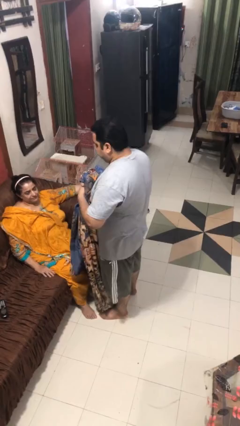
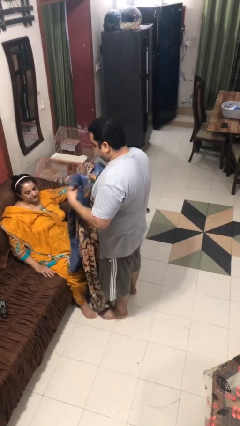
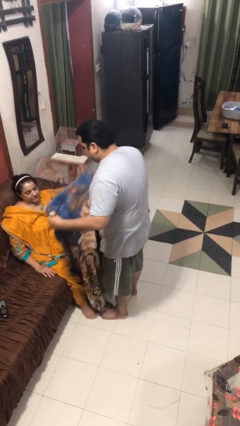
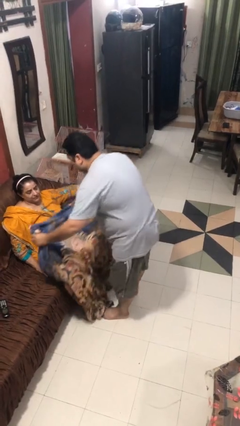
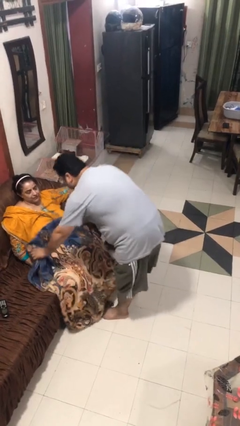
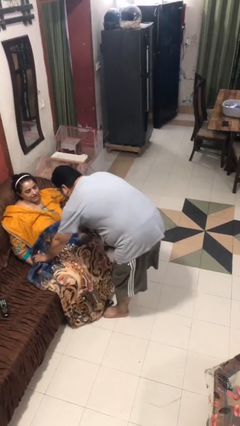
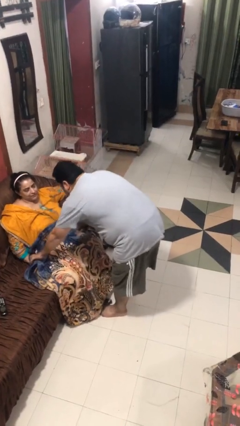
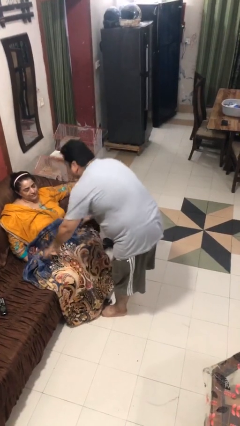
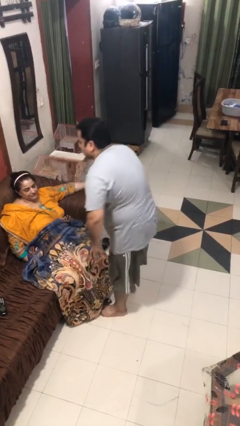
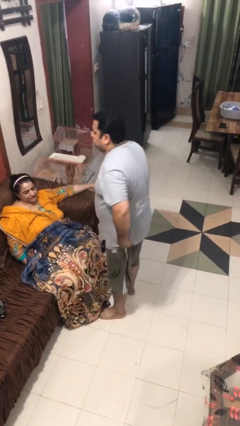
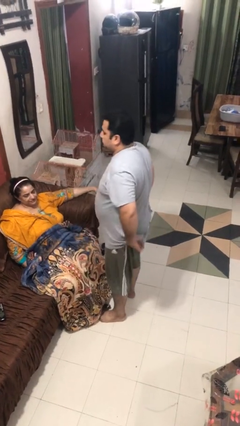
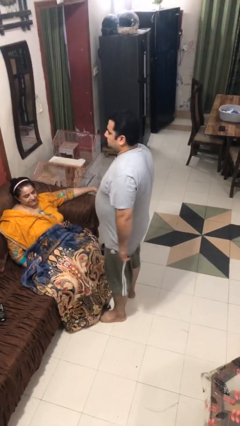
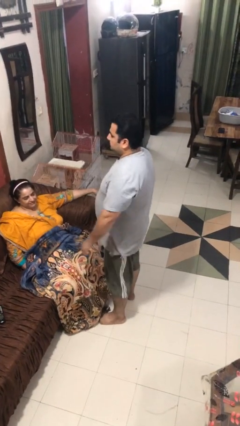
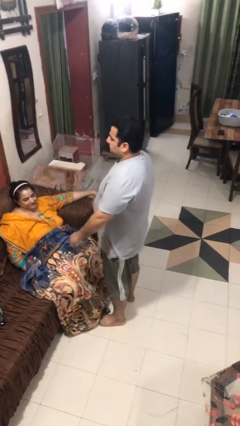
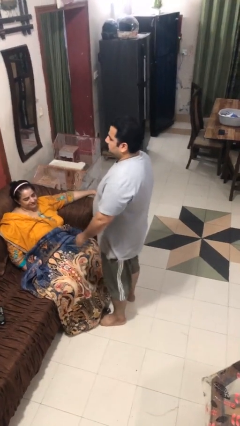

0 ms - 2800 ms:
person covers friend with blanket

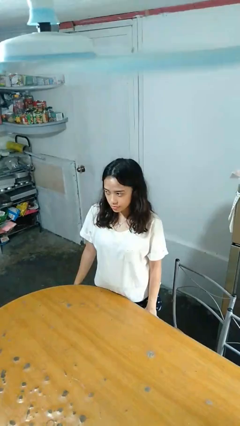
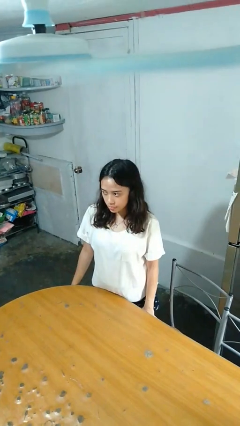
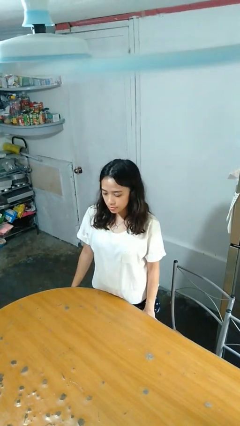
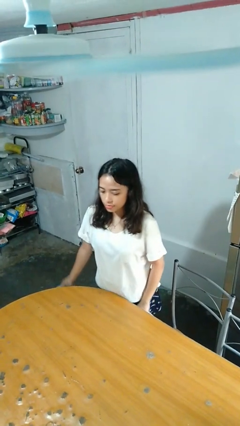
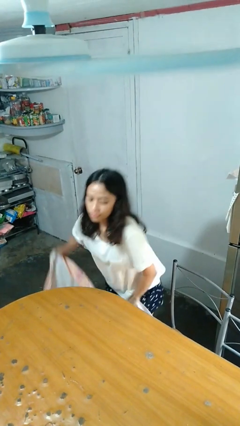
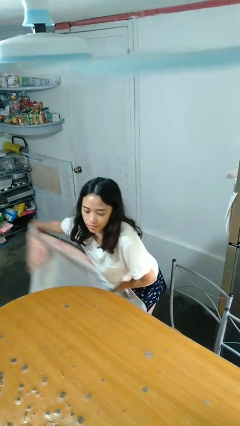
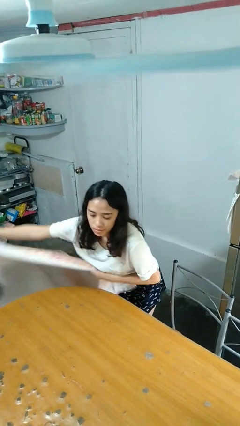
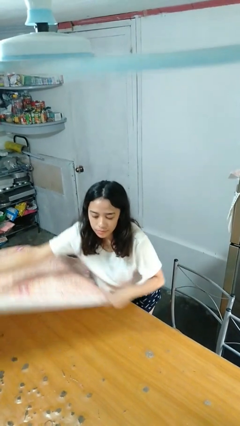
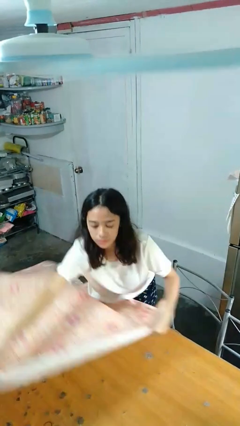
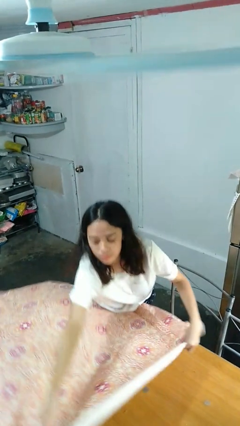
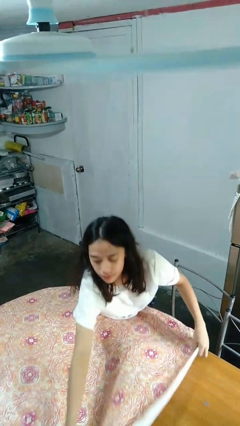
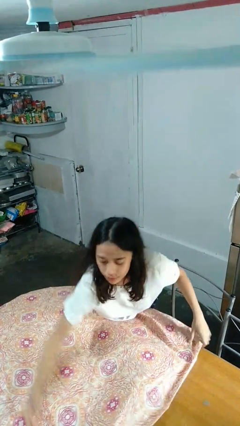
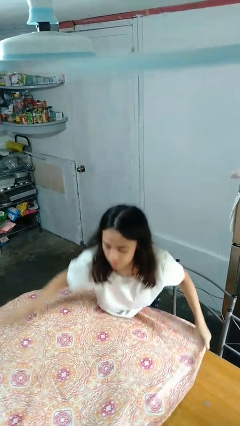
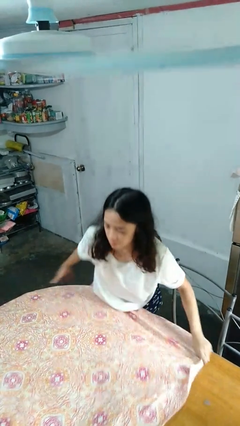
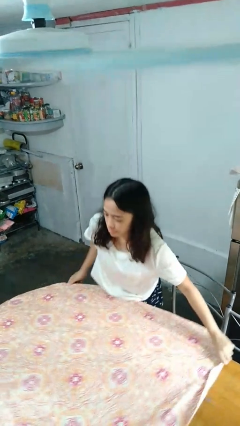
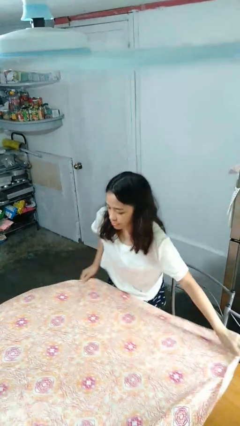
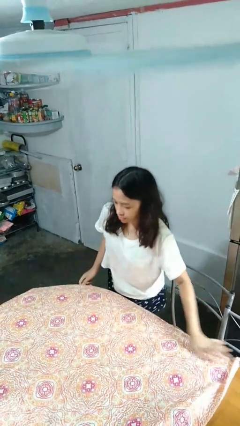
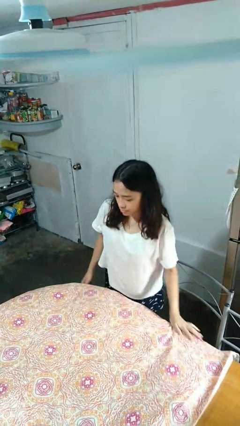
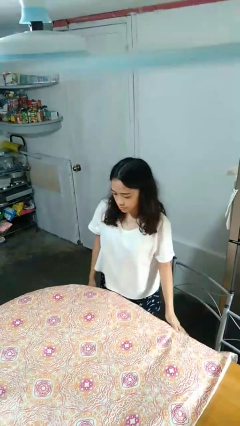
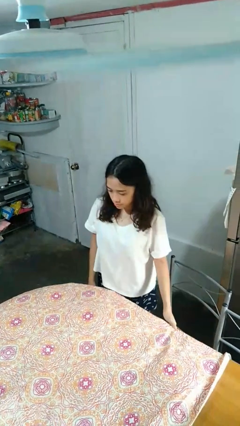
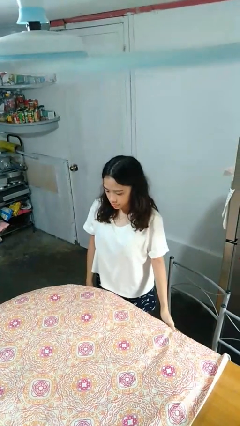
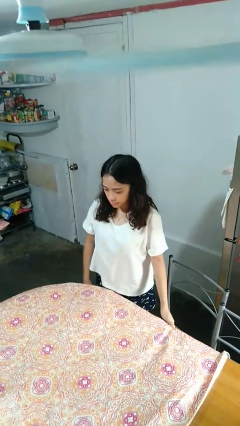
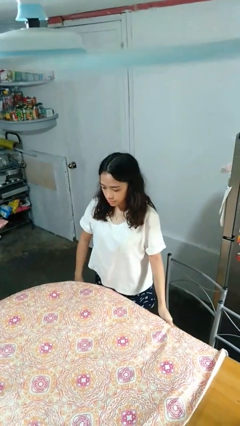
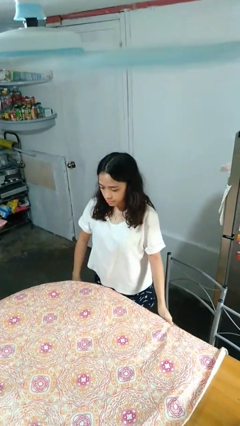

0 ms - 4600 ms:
person spreads tablecloth

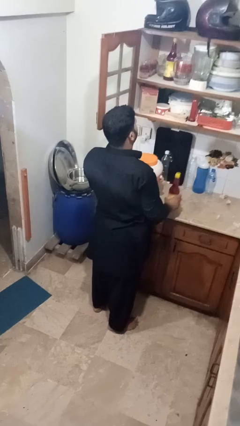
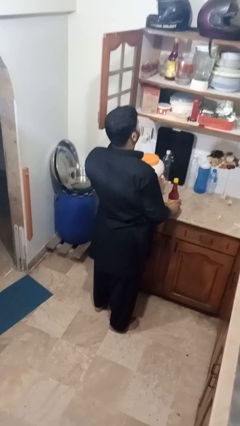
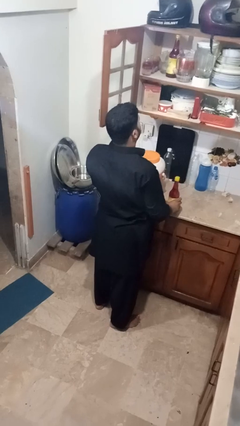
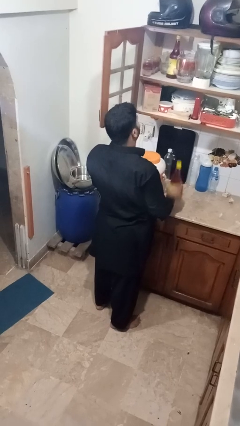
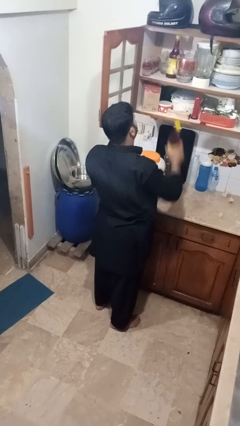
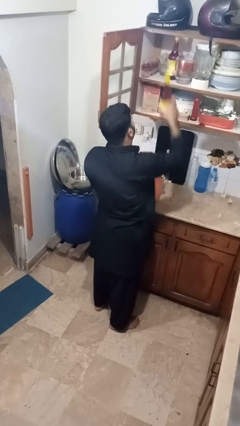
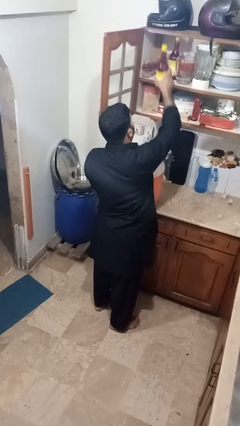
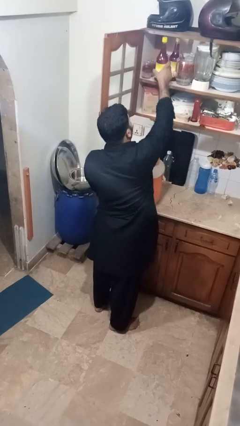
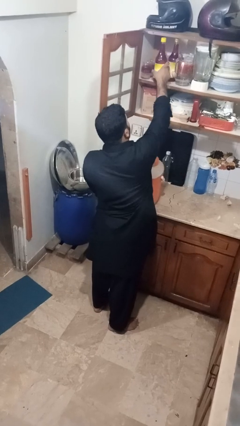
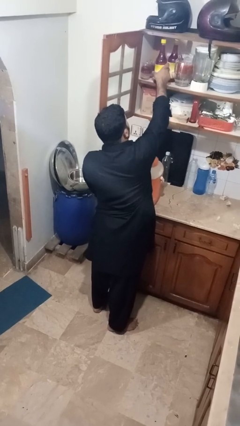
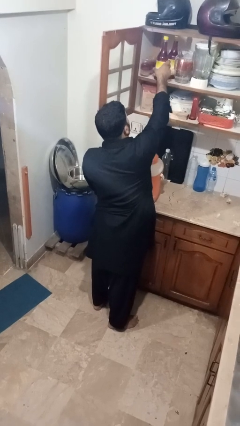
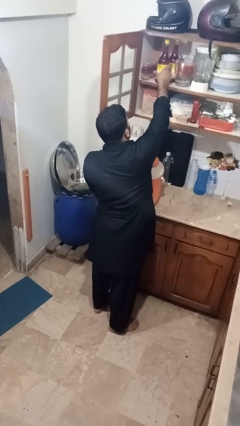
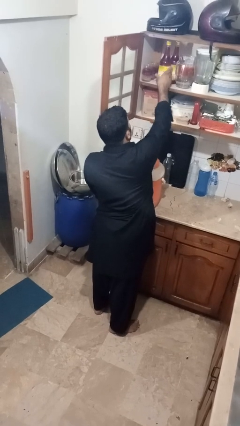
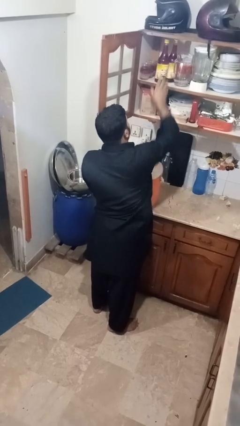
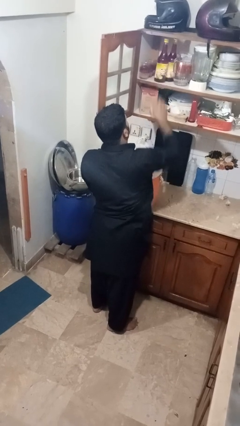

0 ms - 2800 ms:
person puts down object into cabinet

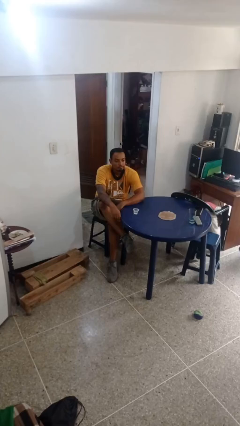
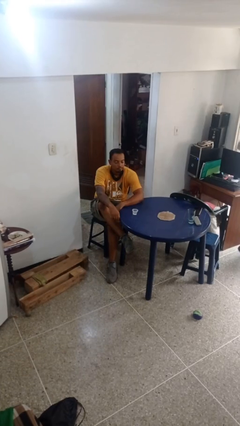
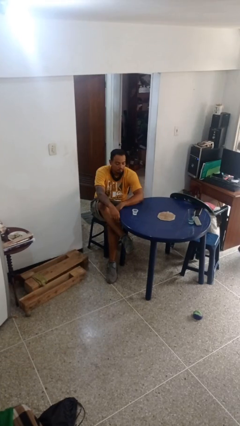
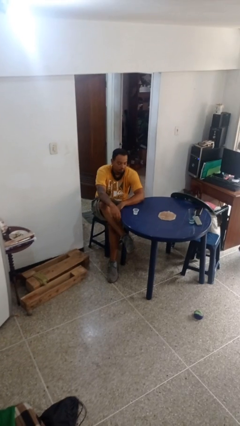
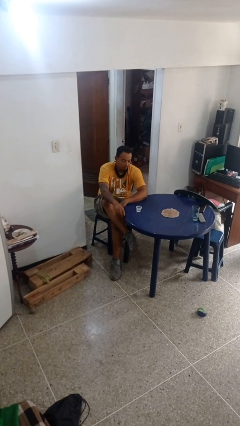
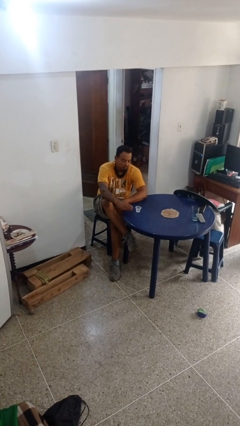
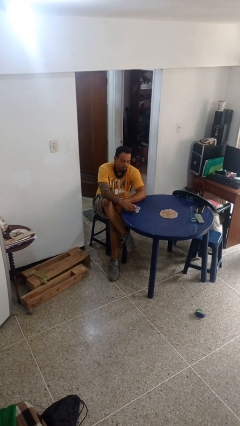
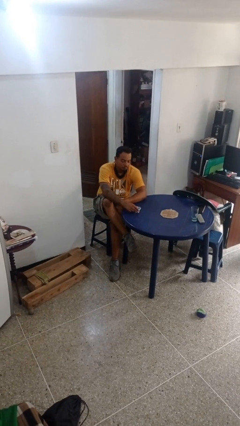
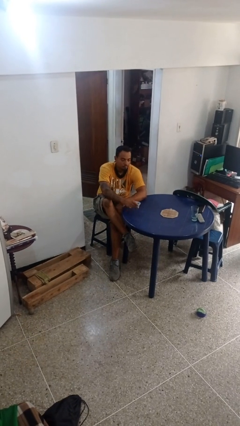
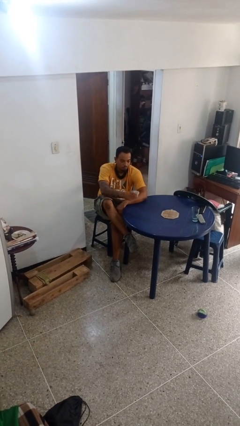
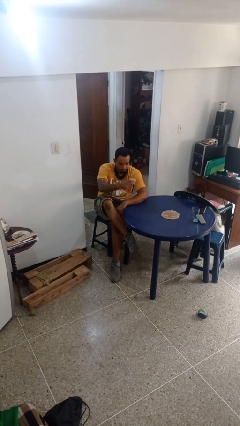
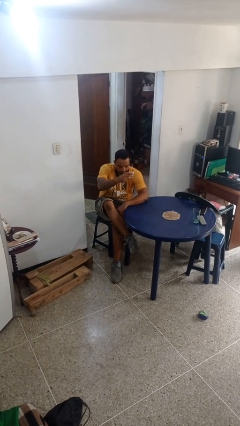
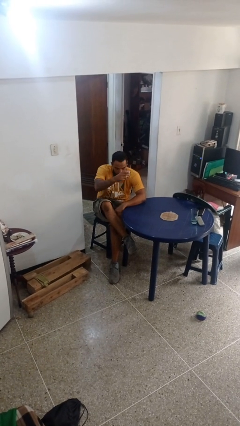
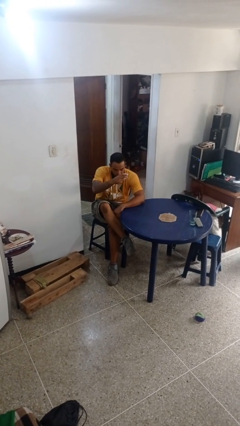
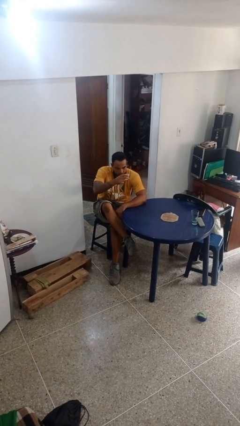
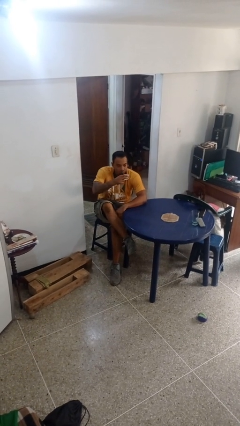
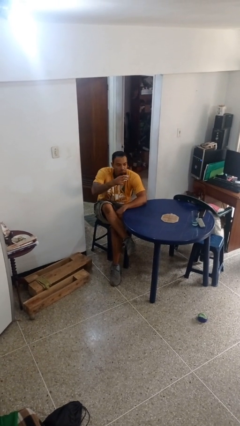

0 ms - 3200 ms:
person picks up object from table

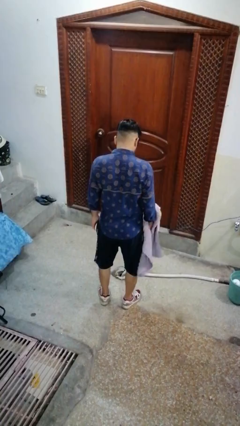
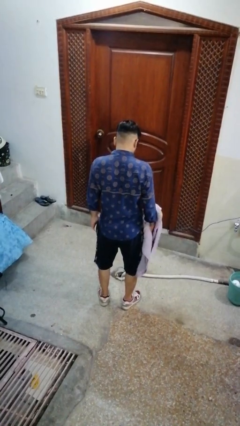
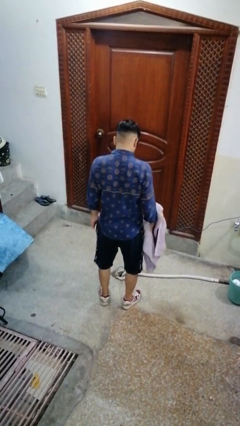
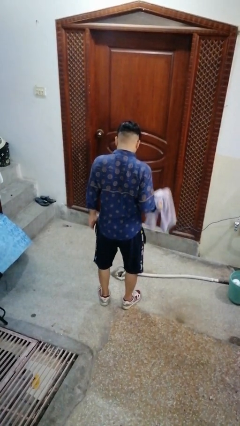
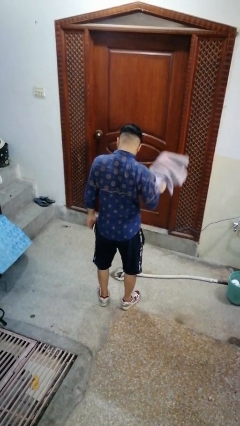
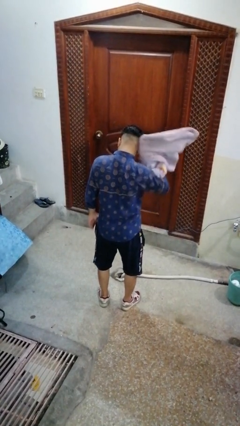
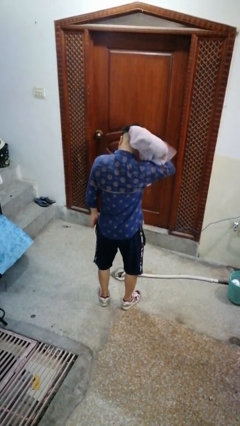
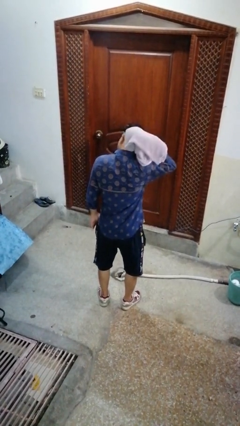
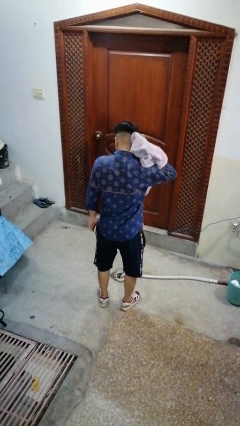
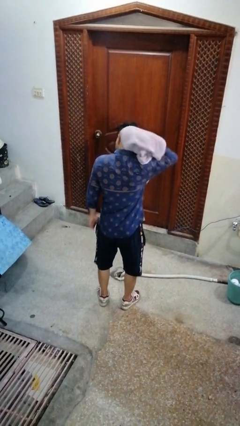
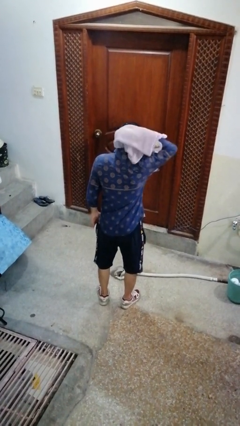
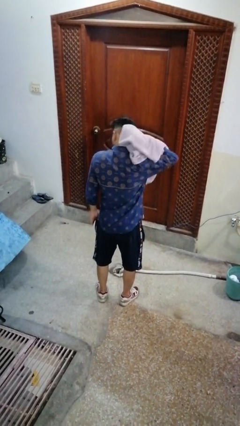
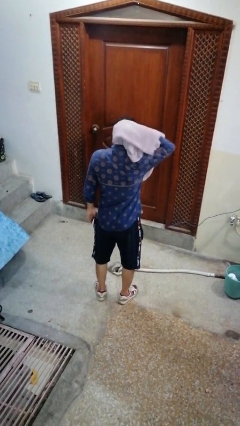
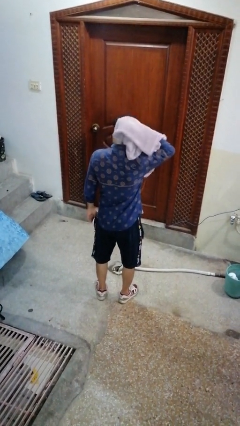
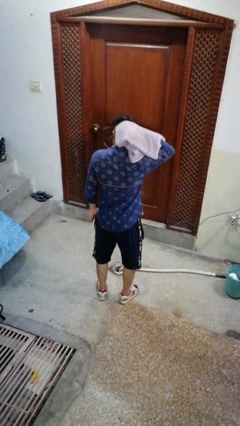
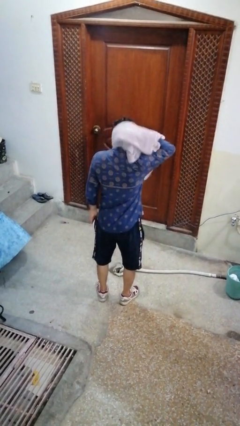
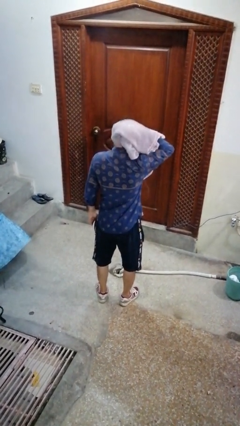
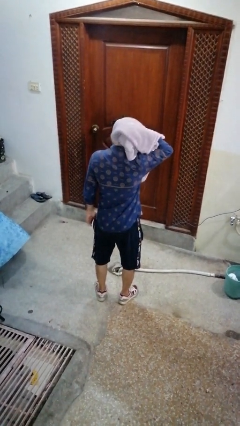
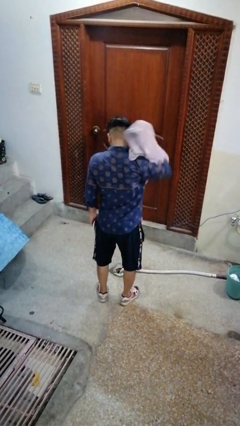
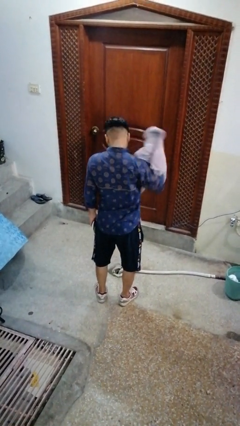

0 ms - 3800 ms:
person dries hair with towel

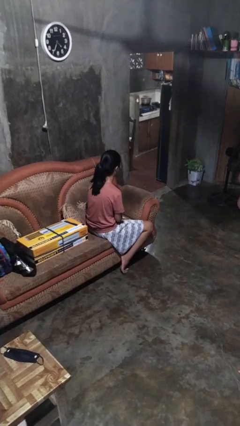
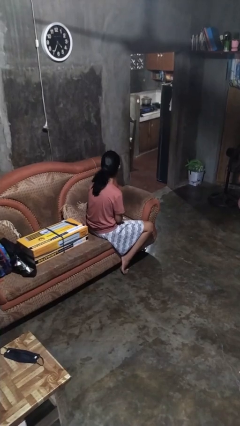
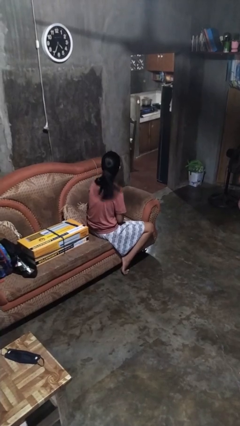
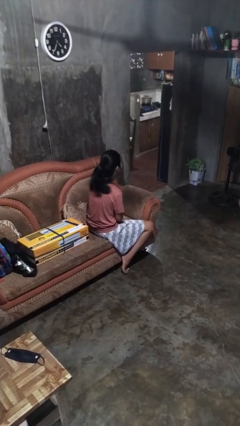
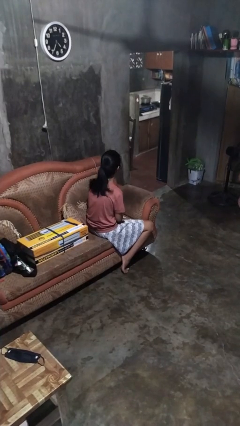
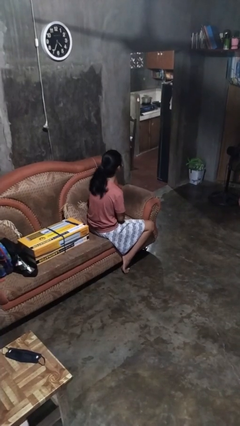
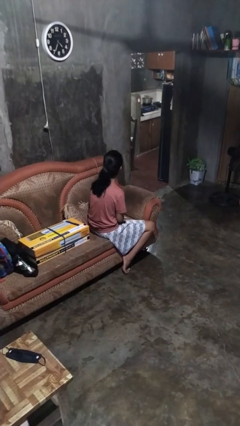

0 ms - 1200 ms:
person shakes head
